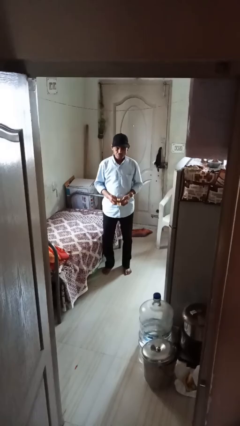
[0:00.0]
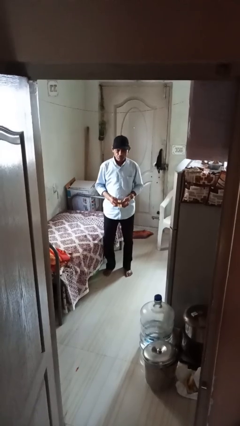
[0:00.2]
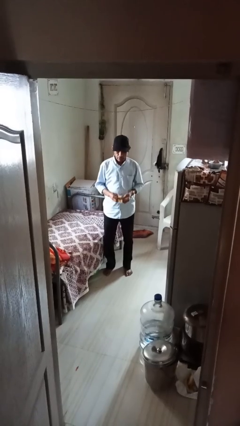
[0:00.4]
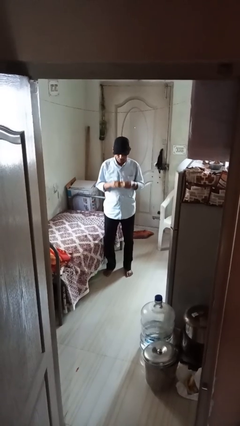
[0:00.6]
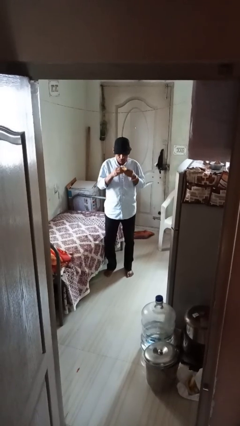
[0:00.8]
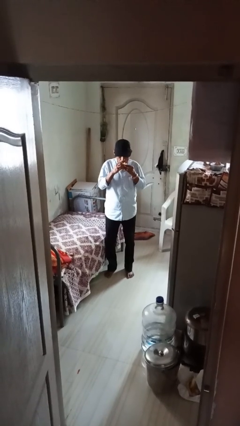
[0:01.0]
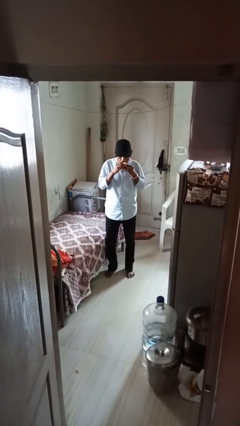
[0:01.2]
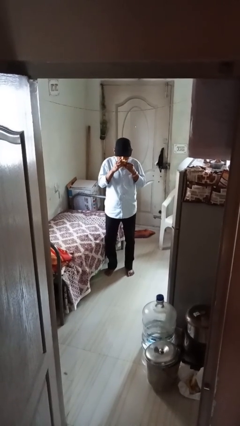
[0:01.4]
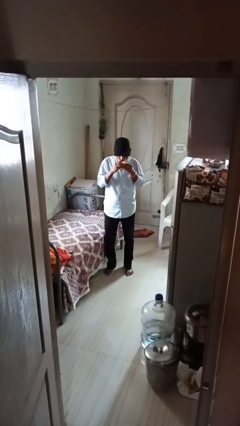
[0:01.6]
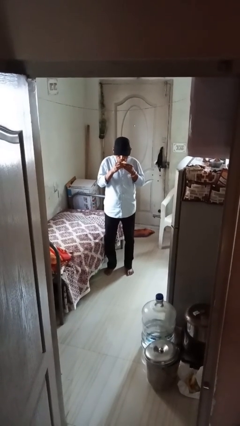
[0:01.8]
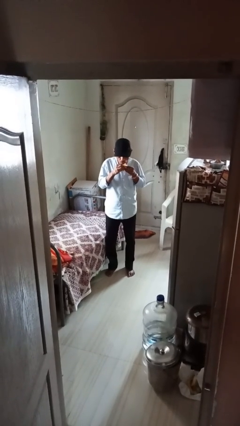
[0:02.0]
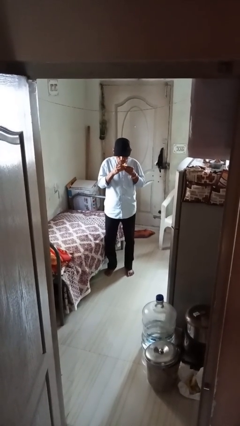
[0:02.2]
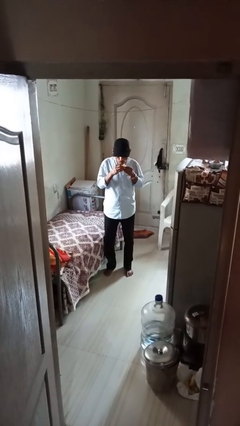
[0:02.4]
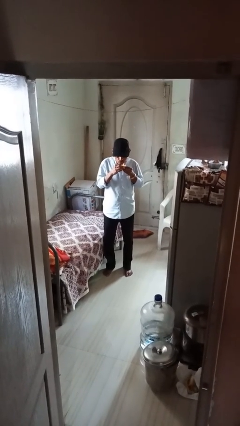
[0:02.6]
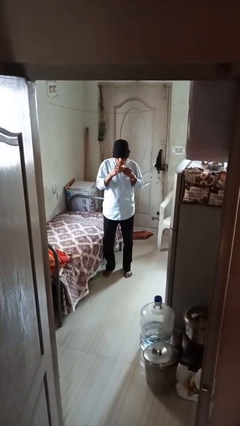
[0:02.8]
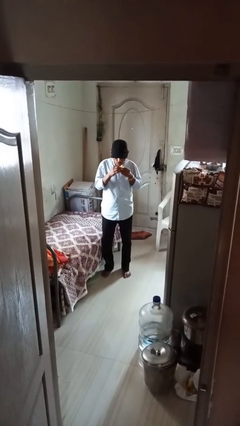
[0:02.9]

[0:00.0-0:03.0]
person eats banana

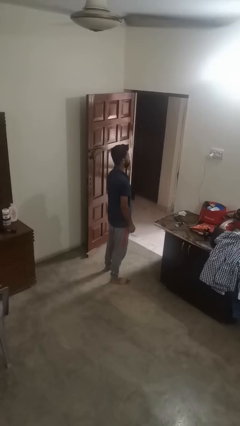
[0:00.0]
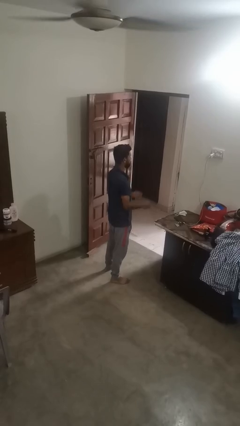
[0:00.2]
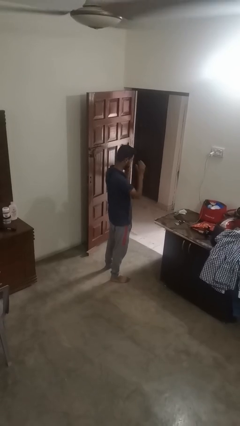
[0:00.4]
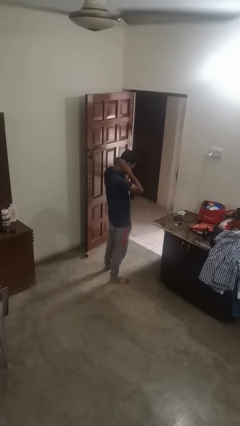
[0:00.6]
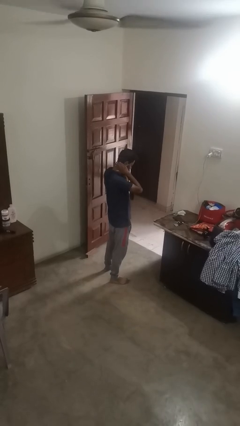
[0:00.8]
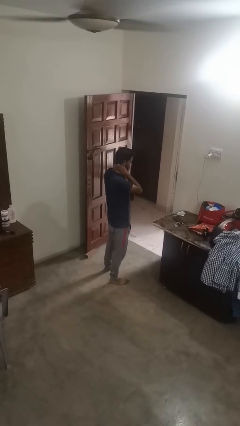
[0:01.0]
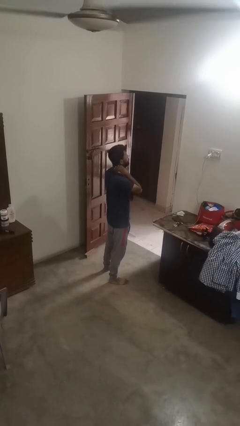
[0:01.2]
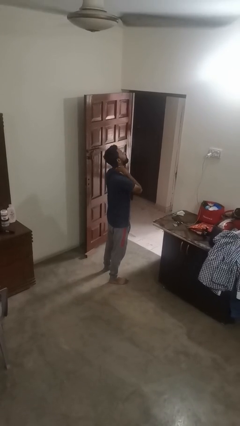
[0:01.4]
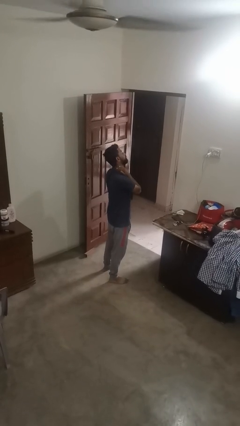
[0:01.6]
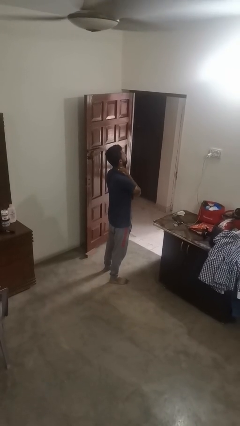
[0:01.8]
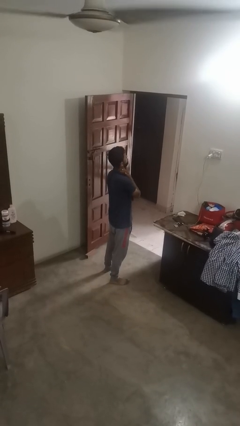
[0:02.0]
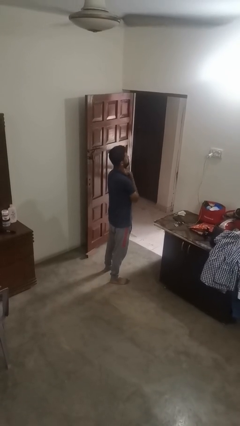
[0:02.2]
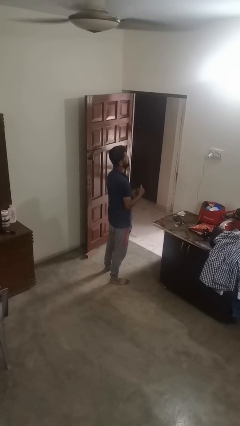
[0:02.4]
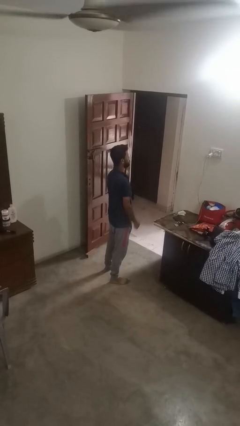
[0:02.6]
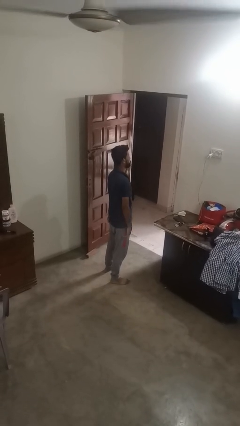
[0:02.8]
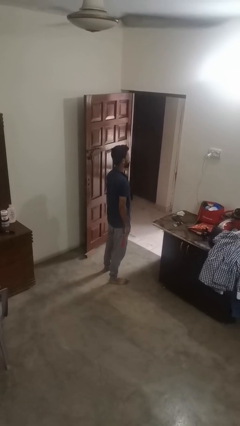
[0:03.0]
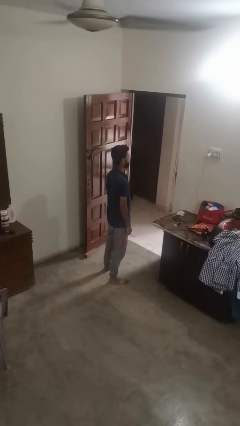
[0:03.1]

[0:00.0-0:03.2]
person rubs neck

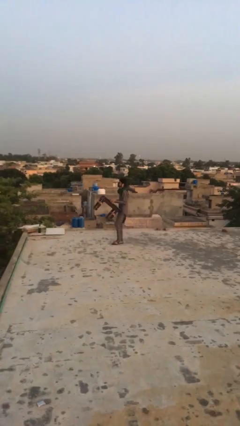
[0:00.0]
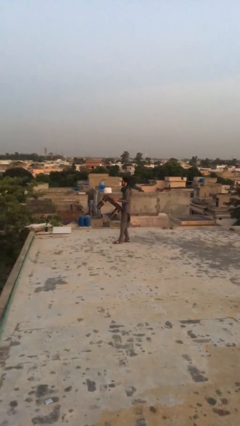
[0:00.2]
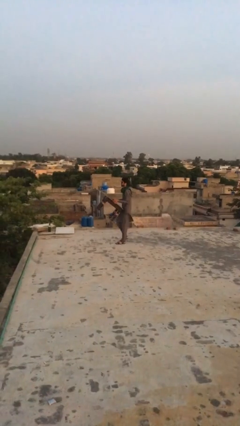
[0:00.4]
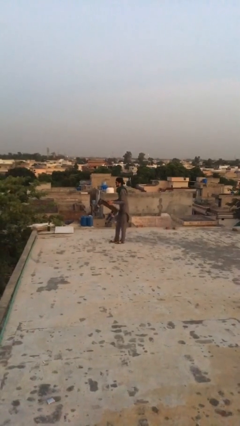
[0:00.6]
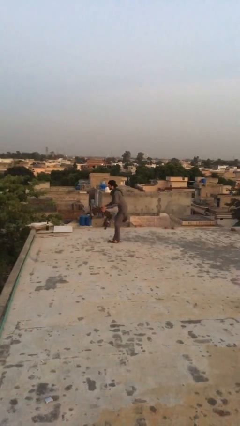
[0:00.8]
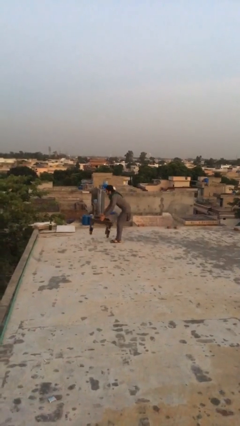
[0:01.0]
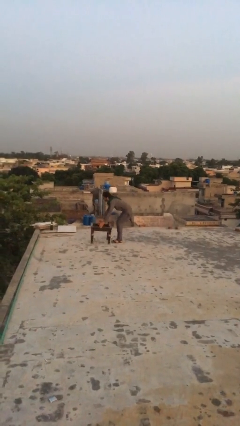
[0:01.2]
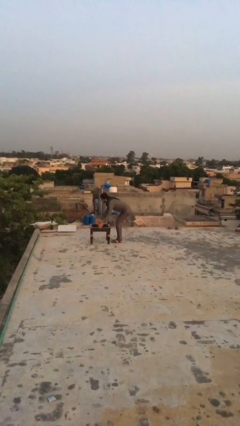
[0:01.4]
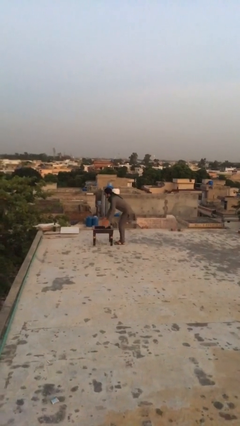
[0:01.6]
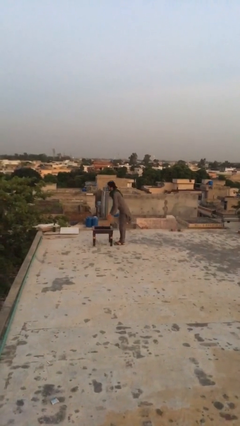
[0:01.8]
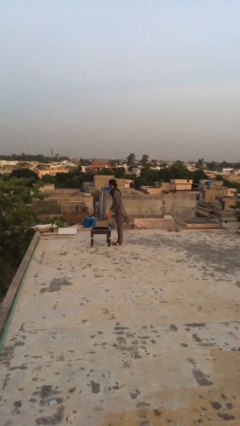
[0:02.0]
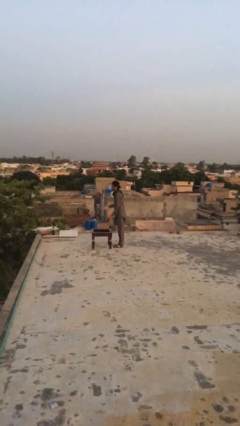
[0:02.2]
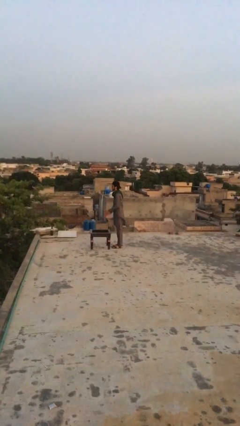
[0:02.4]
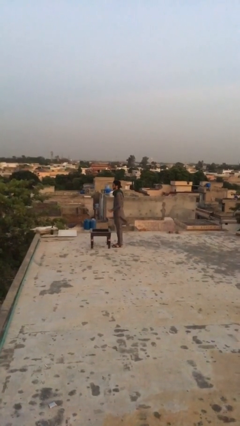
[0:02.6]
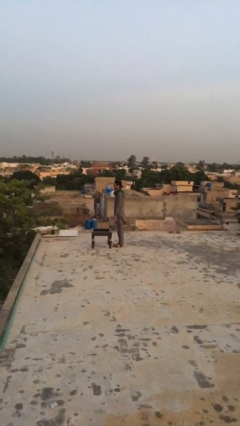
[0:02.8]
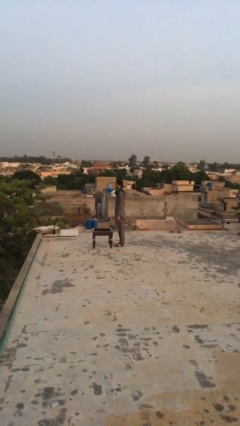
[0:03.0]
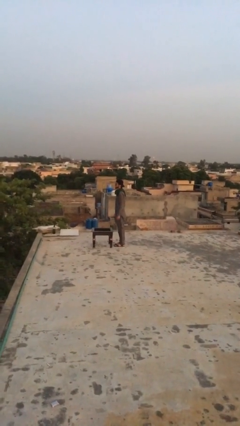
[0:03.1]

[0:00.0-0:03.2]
person puts down object on floor

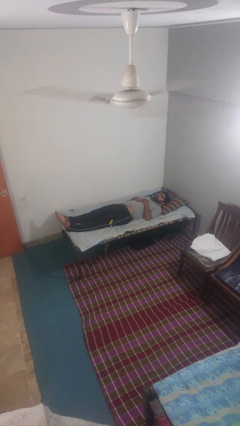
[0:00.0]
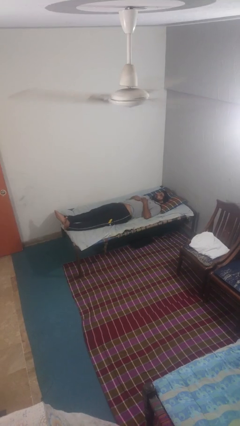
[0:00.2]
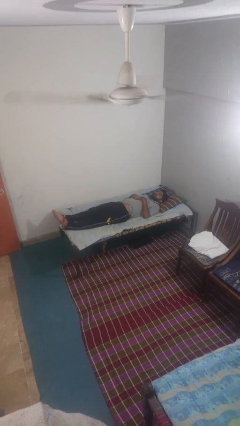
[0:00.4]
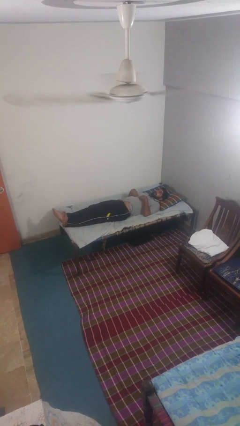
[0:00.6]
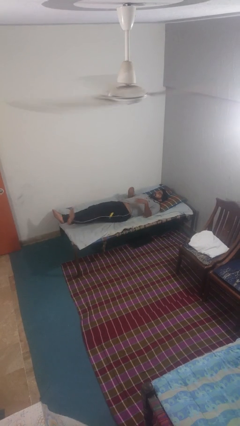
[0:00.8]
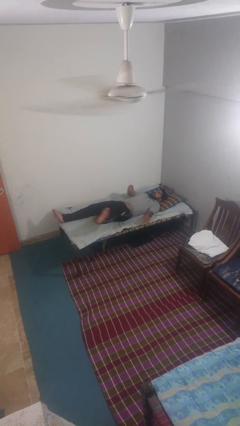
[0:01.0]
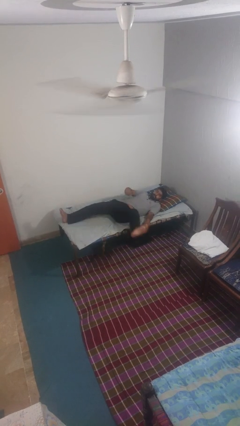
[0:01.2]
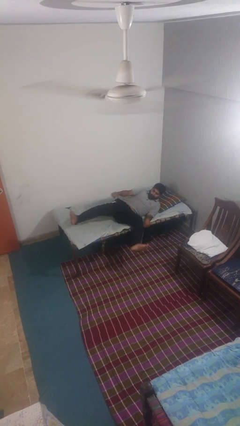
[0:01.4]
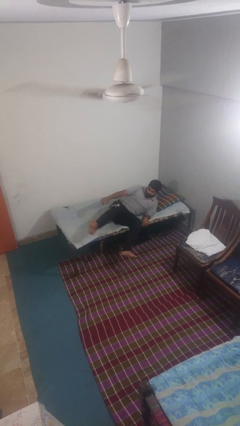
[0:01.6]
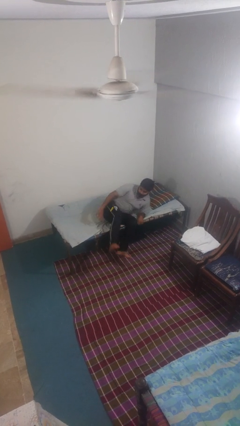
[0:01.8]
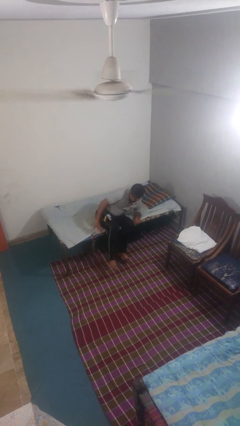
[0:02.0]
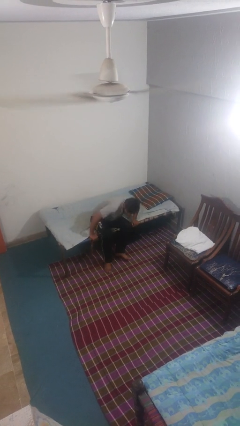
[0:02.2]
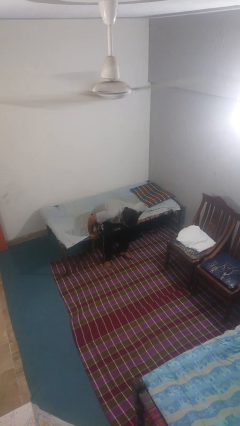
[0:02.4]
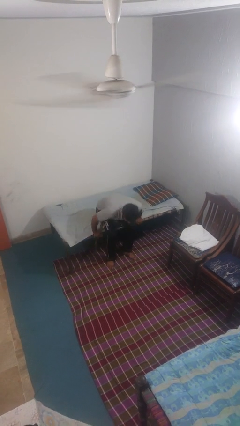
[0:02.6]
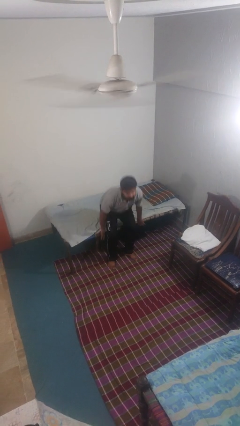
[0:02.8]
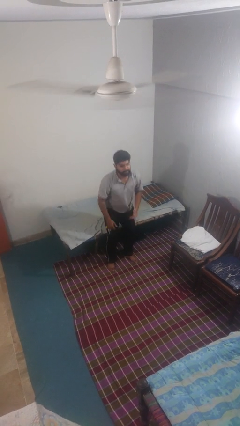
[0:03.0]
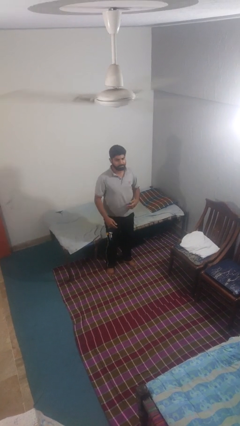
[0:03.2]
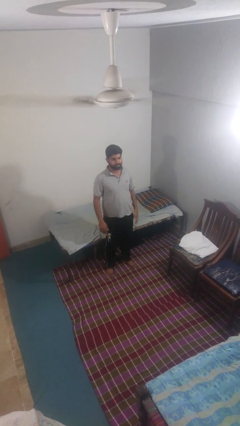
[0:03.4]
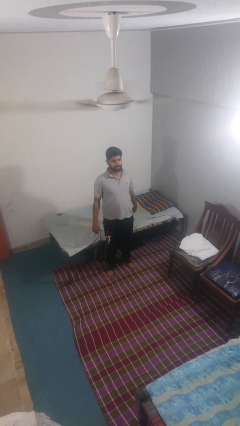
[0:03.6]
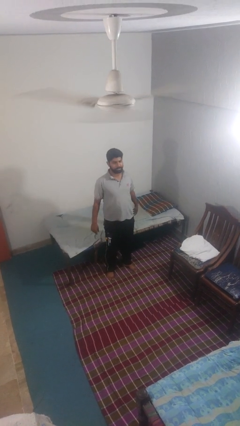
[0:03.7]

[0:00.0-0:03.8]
person stands up

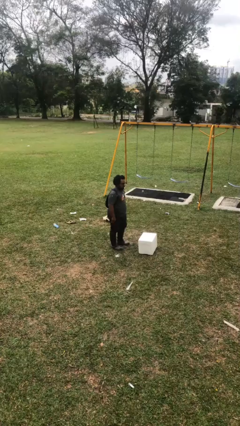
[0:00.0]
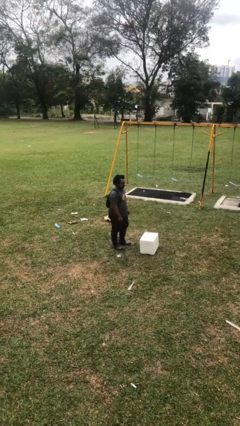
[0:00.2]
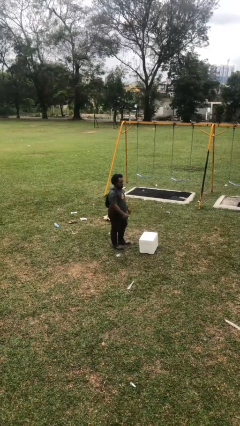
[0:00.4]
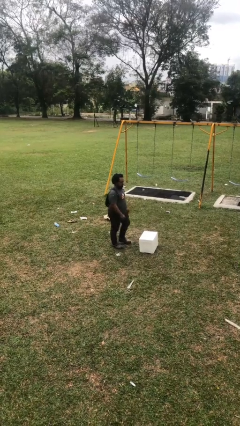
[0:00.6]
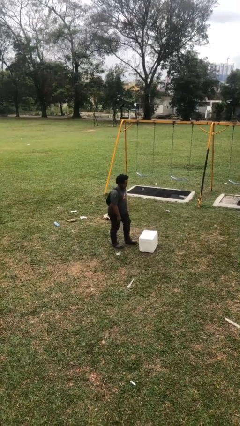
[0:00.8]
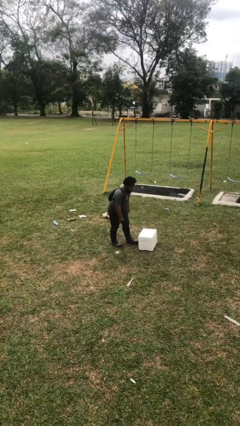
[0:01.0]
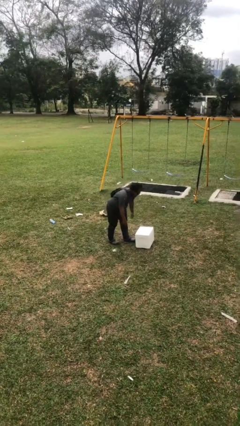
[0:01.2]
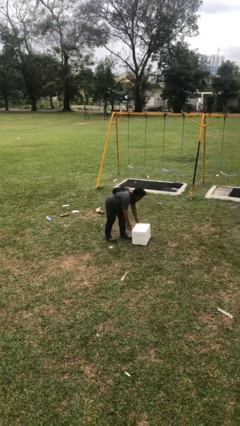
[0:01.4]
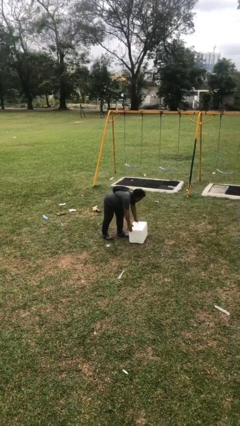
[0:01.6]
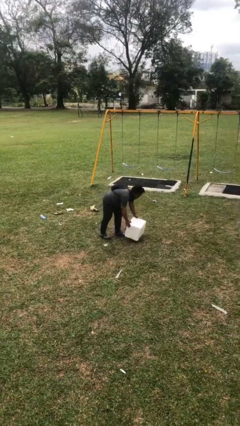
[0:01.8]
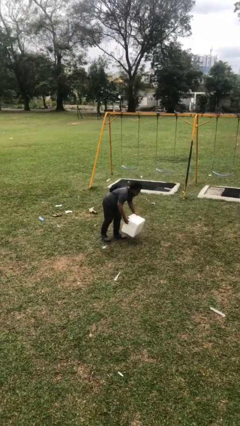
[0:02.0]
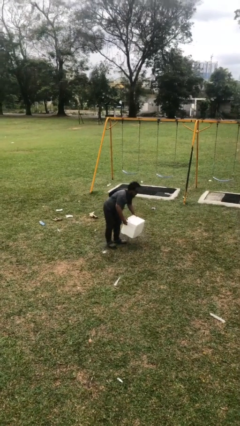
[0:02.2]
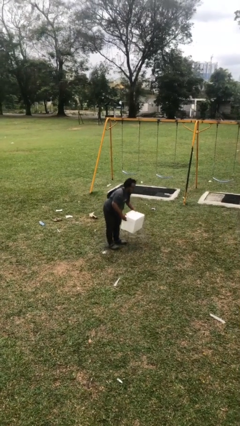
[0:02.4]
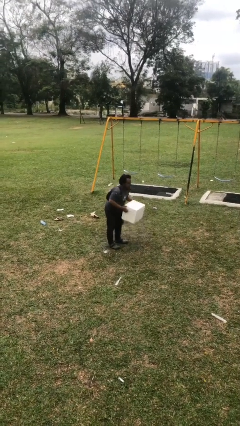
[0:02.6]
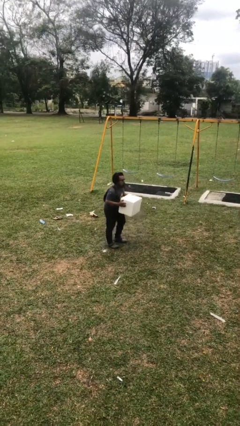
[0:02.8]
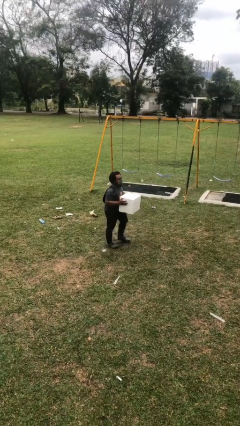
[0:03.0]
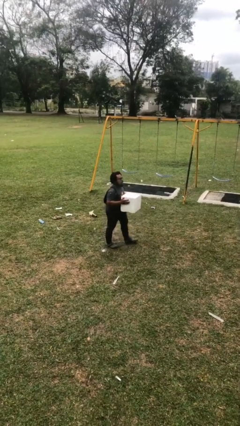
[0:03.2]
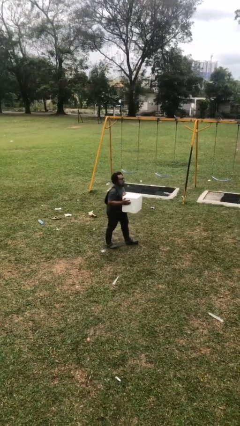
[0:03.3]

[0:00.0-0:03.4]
person picks up object from floor

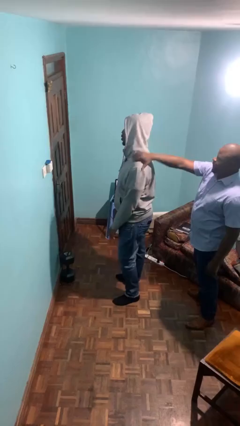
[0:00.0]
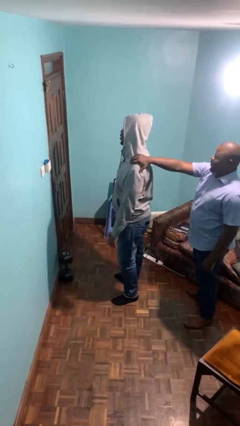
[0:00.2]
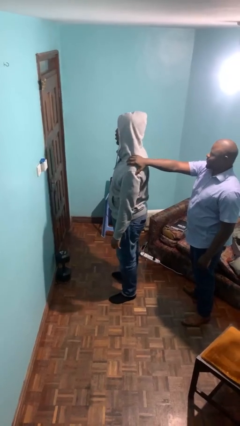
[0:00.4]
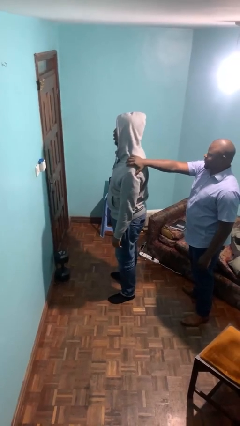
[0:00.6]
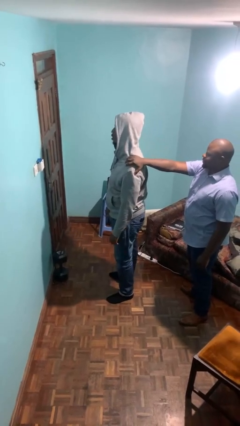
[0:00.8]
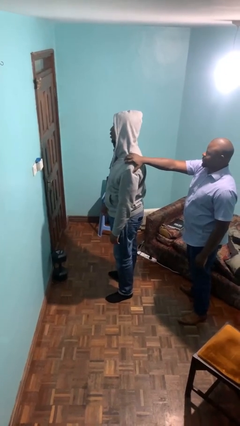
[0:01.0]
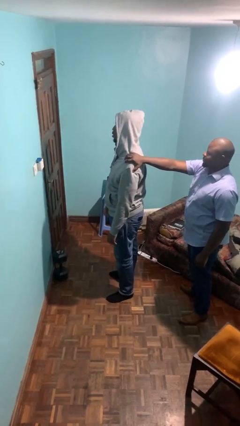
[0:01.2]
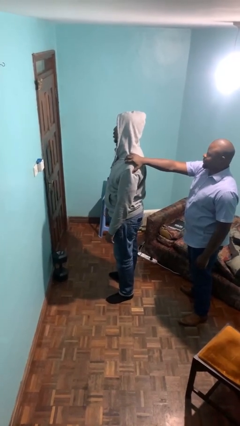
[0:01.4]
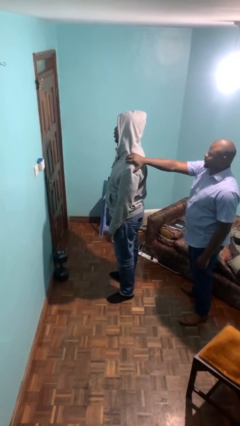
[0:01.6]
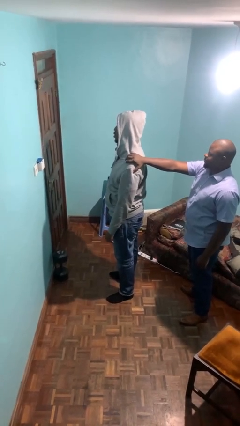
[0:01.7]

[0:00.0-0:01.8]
person grabs person by shoulder
